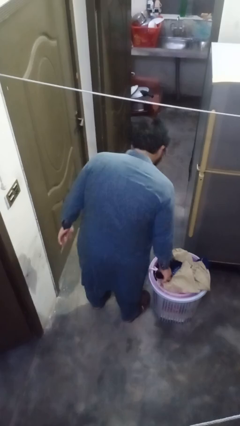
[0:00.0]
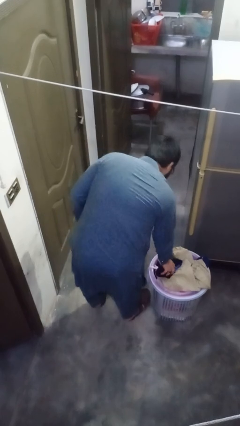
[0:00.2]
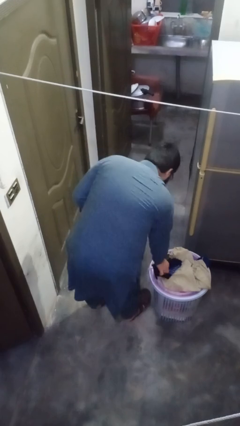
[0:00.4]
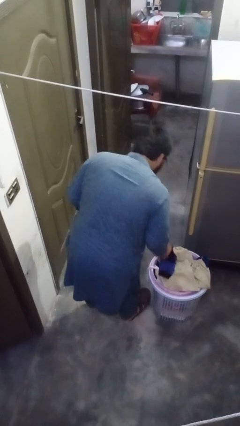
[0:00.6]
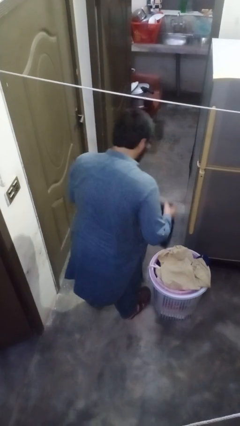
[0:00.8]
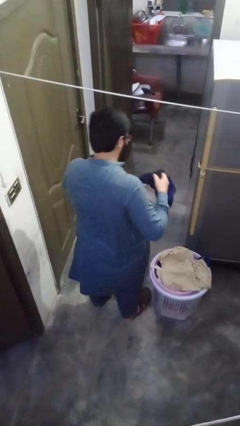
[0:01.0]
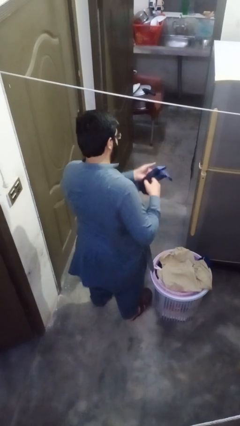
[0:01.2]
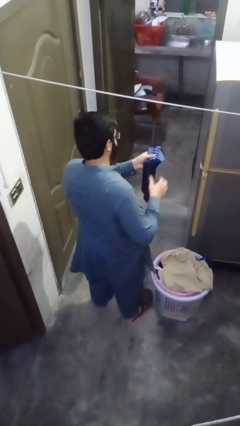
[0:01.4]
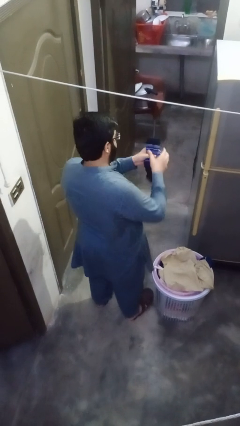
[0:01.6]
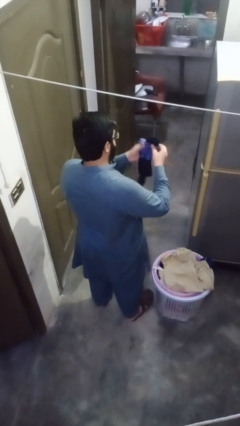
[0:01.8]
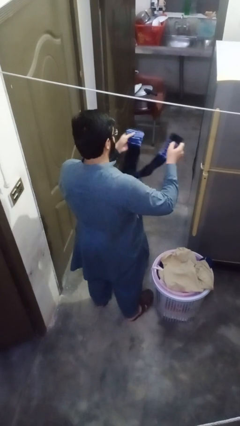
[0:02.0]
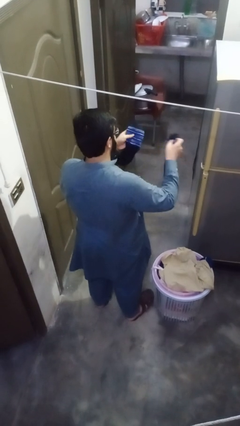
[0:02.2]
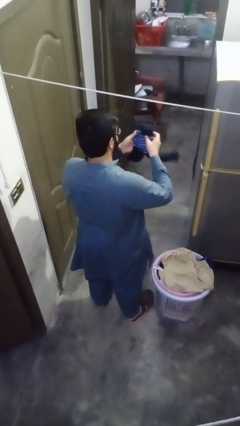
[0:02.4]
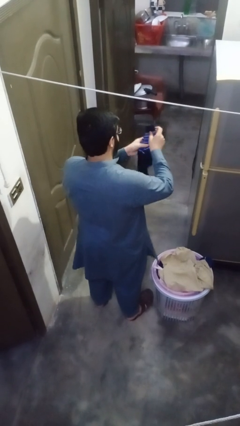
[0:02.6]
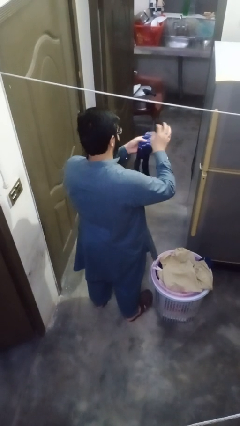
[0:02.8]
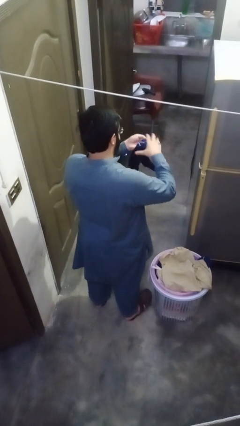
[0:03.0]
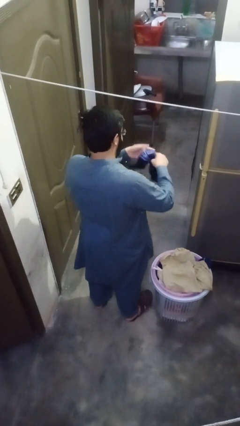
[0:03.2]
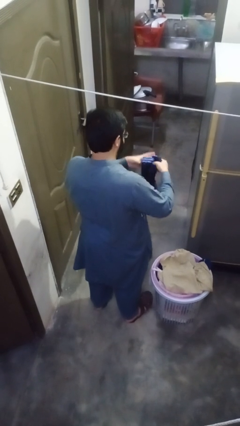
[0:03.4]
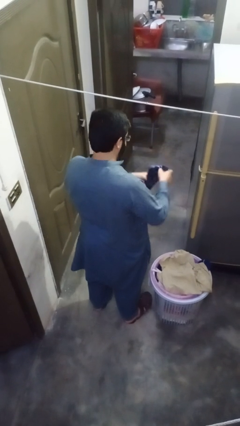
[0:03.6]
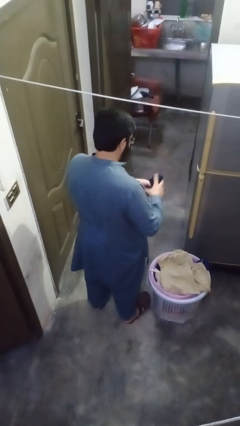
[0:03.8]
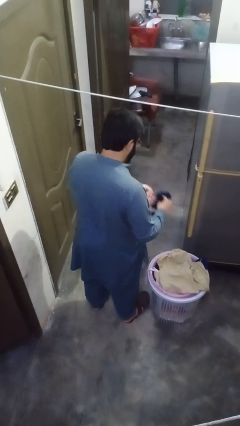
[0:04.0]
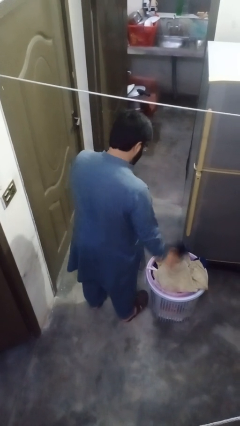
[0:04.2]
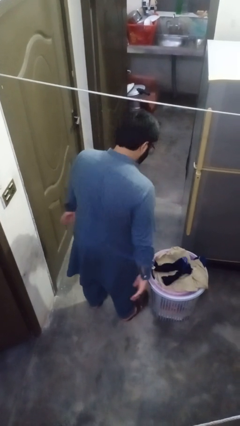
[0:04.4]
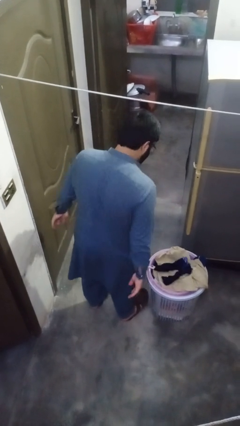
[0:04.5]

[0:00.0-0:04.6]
person folds socks

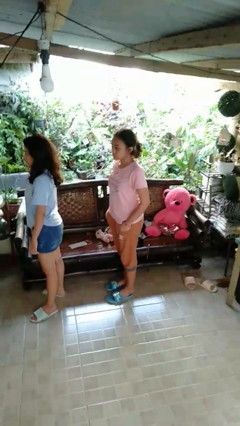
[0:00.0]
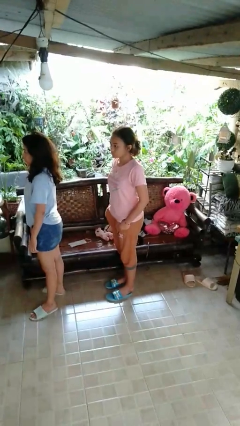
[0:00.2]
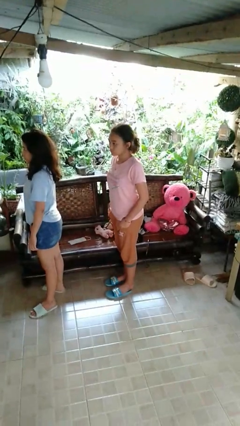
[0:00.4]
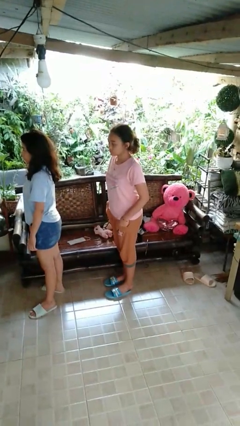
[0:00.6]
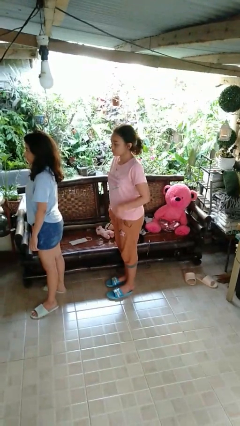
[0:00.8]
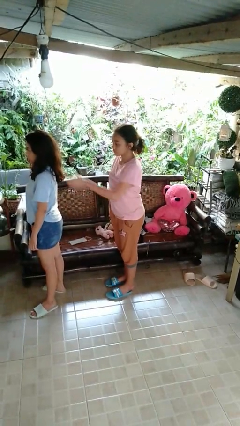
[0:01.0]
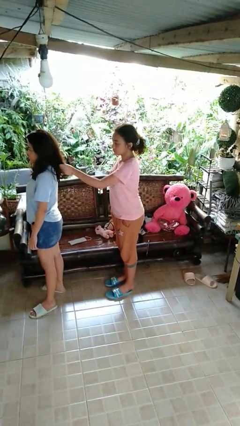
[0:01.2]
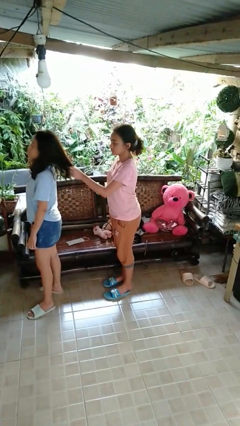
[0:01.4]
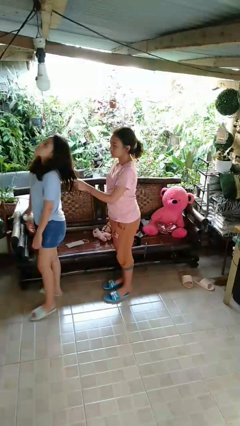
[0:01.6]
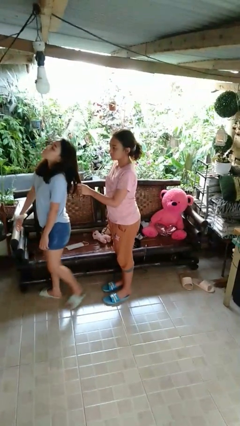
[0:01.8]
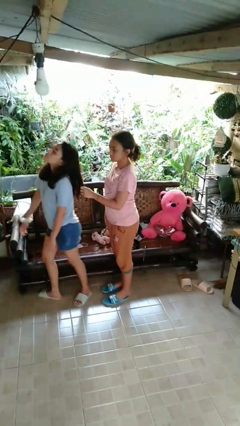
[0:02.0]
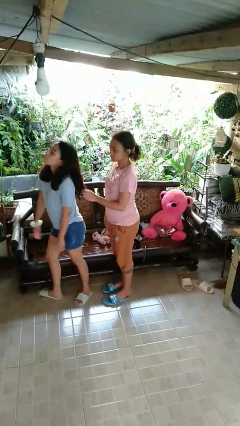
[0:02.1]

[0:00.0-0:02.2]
person grabs person by hair

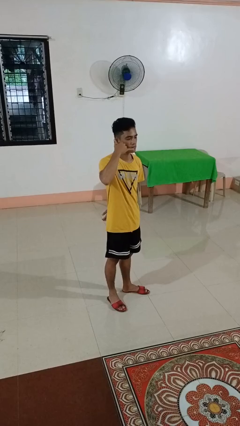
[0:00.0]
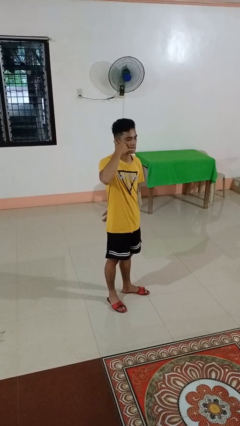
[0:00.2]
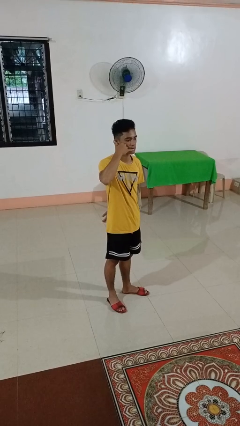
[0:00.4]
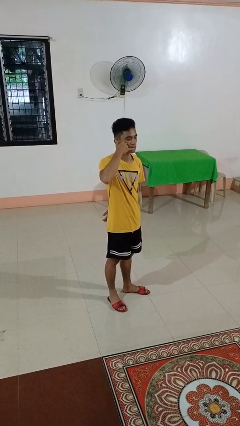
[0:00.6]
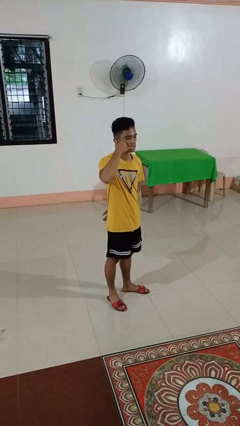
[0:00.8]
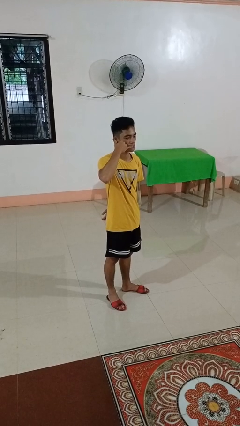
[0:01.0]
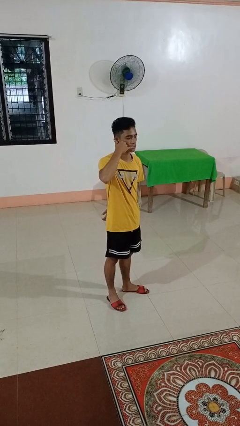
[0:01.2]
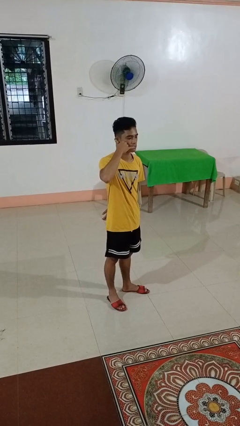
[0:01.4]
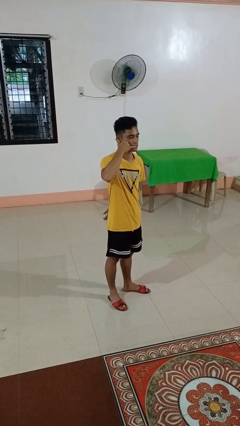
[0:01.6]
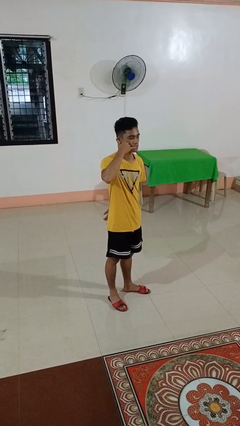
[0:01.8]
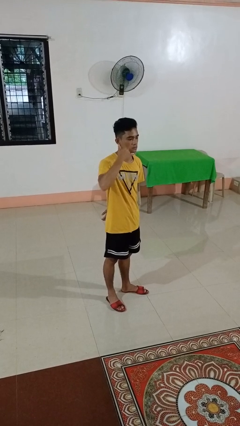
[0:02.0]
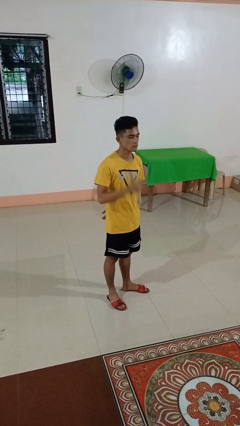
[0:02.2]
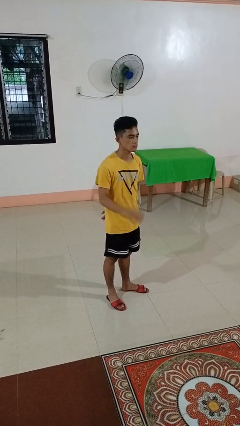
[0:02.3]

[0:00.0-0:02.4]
person gestures call me

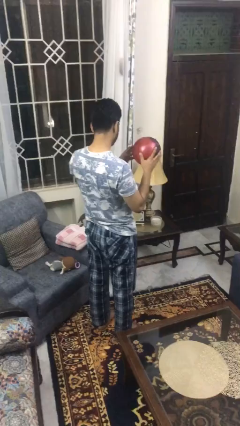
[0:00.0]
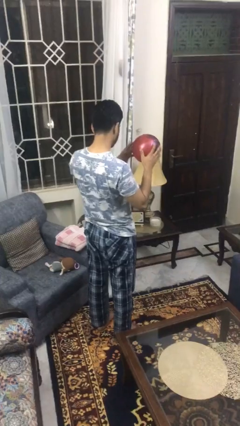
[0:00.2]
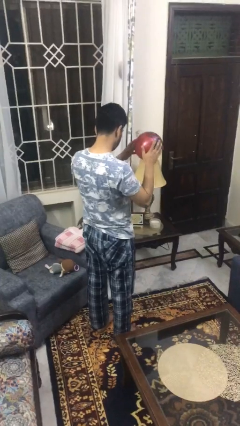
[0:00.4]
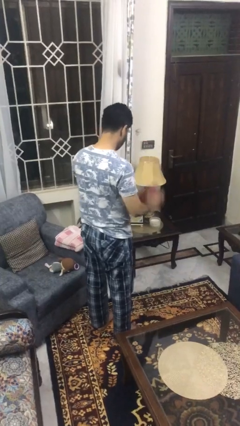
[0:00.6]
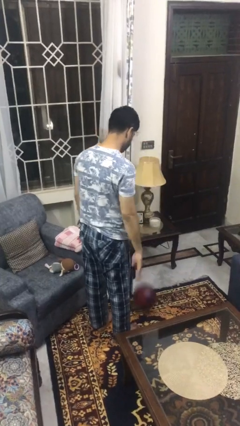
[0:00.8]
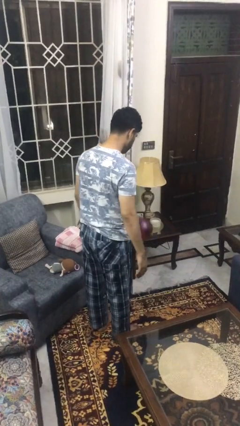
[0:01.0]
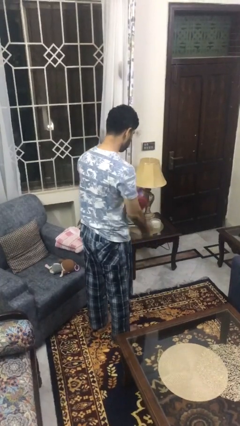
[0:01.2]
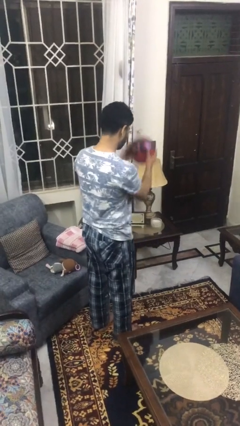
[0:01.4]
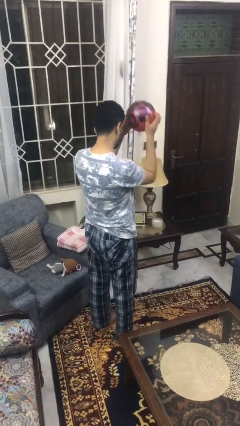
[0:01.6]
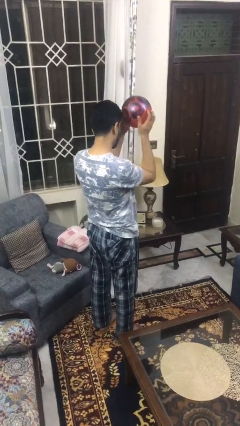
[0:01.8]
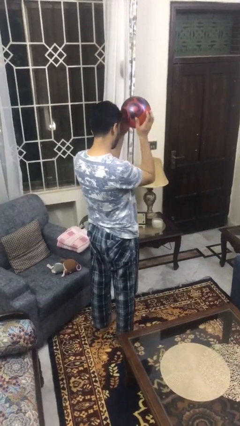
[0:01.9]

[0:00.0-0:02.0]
person bounces ball on floor

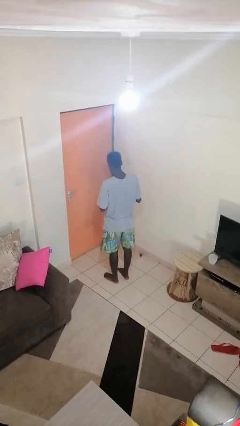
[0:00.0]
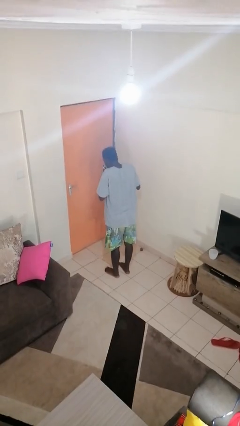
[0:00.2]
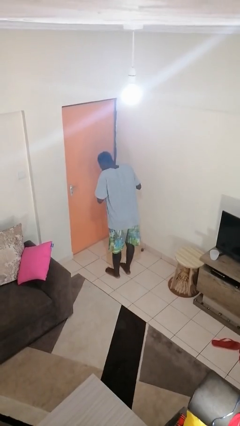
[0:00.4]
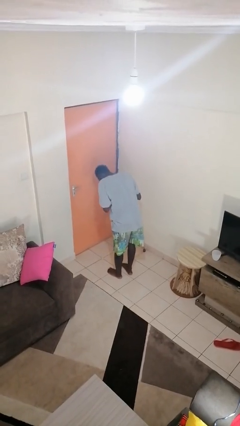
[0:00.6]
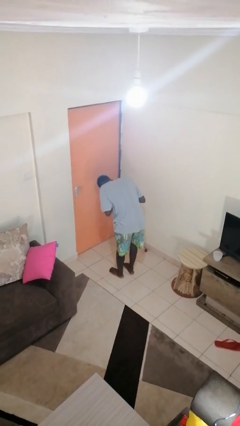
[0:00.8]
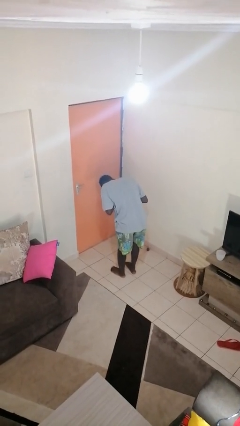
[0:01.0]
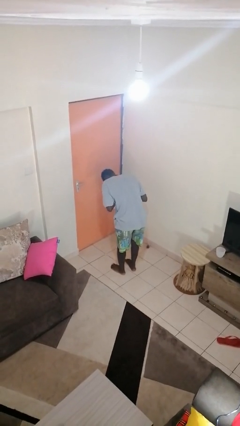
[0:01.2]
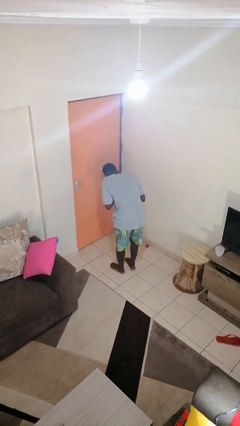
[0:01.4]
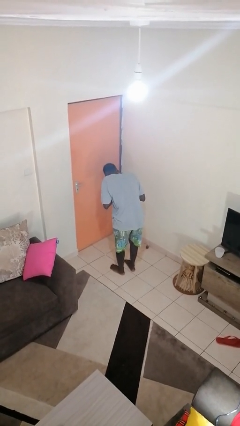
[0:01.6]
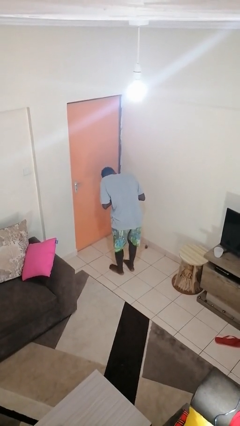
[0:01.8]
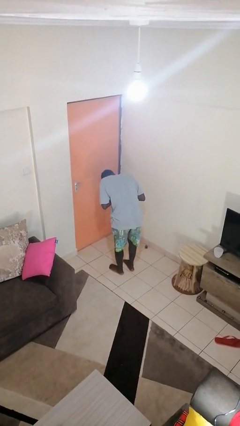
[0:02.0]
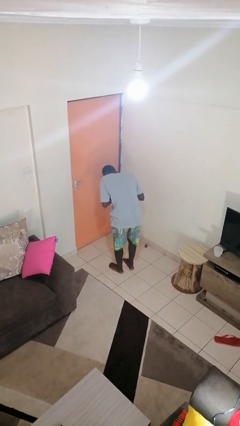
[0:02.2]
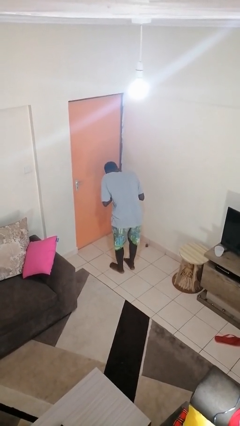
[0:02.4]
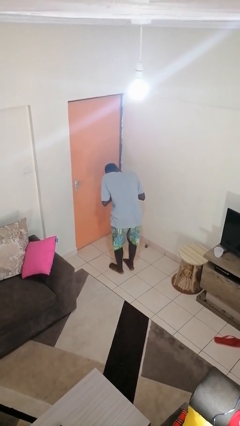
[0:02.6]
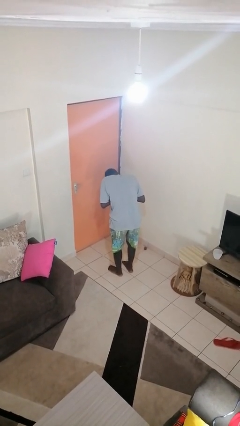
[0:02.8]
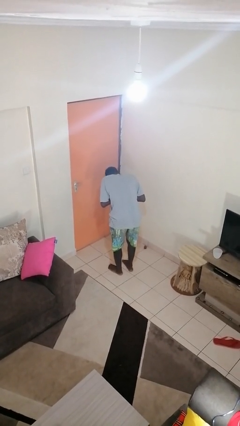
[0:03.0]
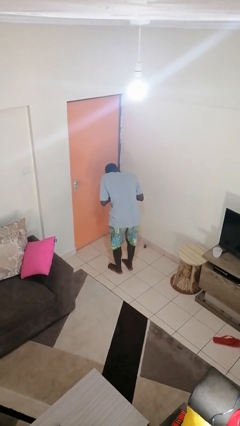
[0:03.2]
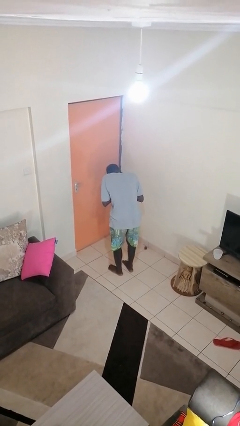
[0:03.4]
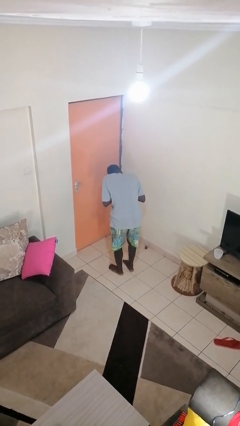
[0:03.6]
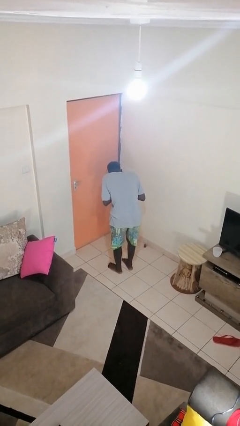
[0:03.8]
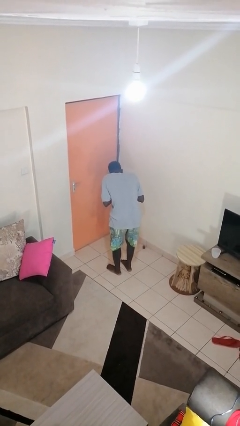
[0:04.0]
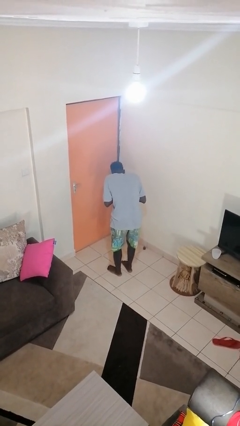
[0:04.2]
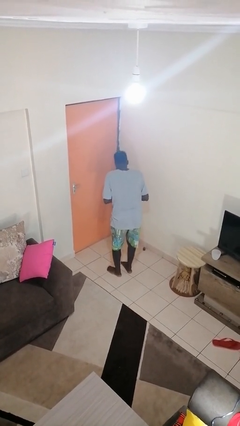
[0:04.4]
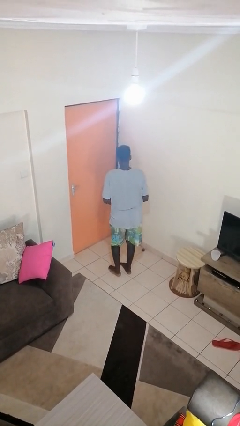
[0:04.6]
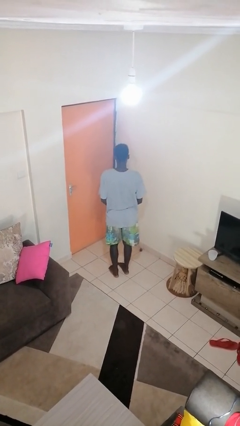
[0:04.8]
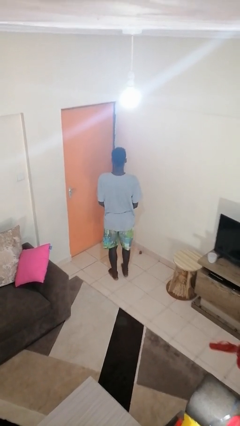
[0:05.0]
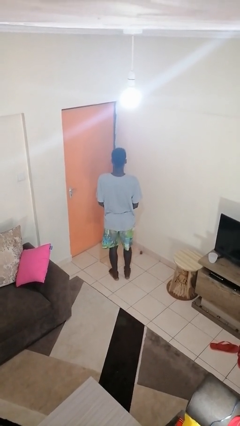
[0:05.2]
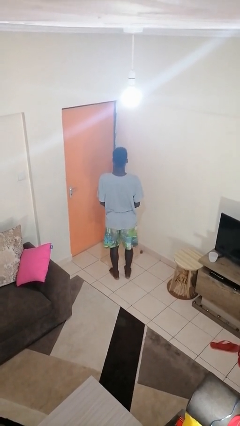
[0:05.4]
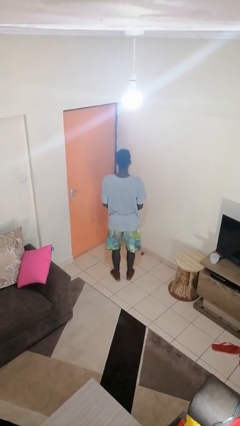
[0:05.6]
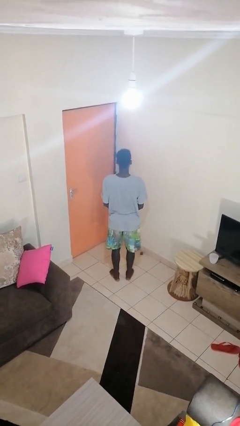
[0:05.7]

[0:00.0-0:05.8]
person blows nose

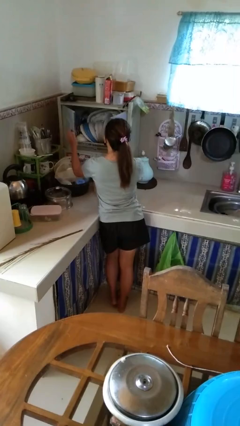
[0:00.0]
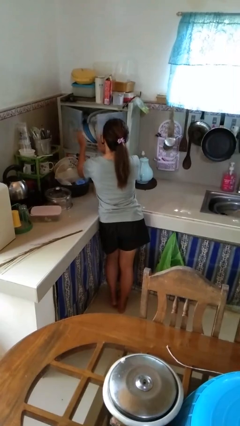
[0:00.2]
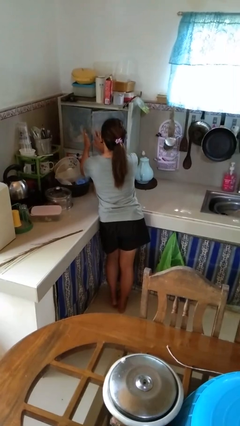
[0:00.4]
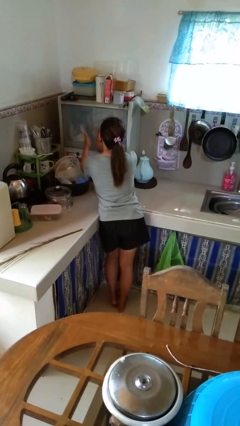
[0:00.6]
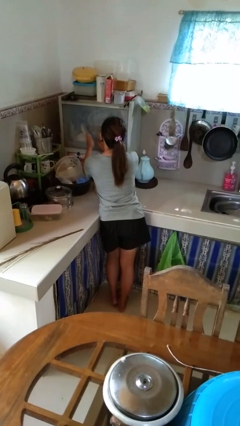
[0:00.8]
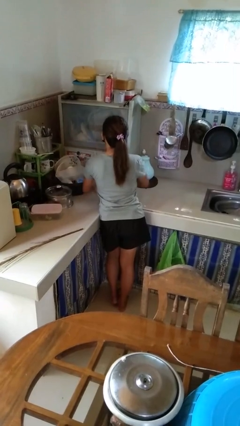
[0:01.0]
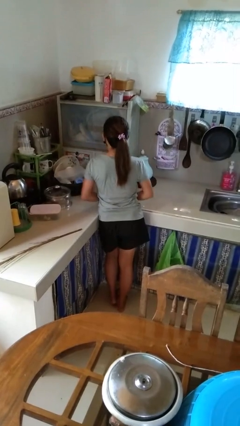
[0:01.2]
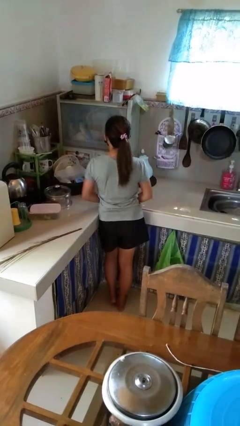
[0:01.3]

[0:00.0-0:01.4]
person closes kitchen drawer
